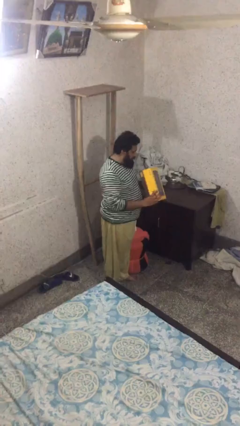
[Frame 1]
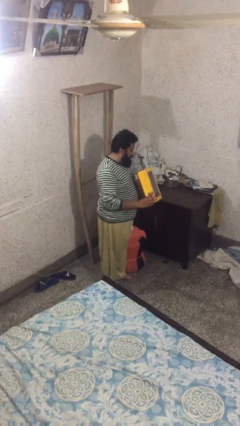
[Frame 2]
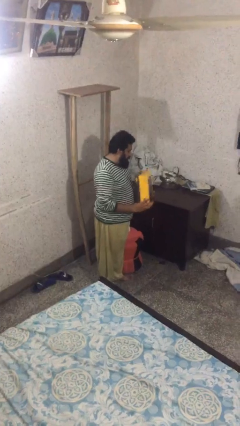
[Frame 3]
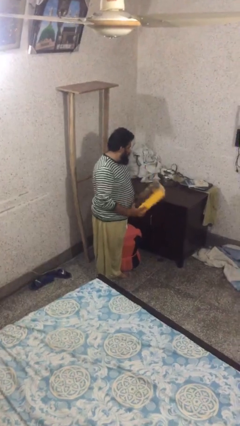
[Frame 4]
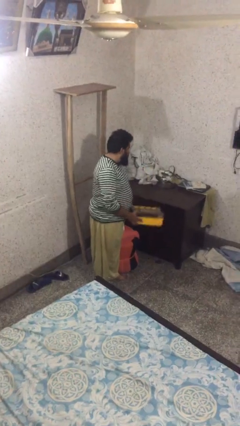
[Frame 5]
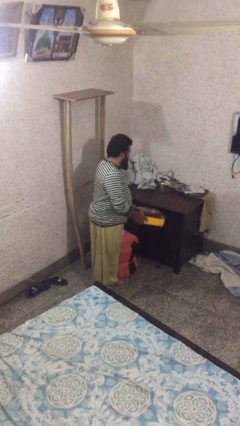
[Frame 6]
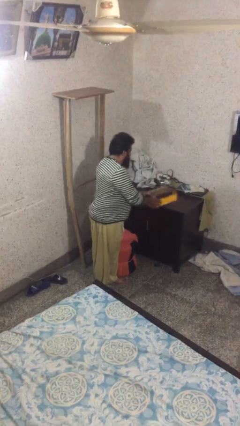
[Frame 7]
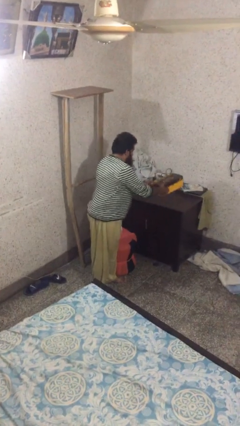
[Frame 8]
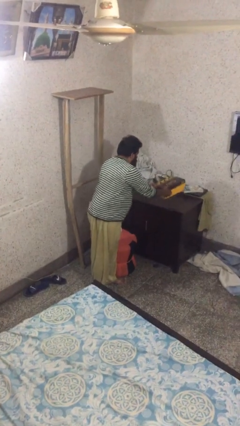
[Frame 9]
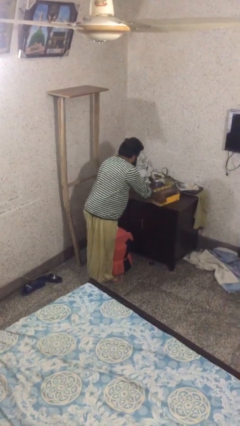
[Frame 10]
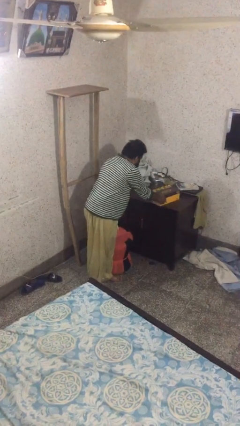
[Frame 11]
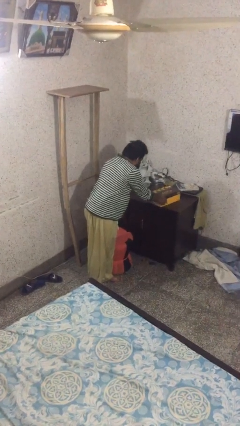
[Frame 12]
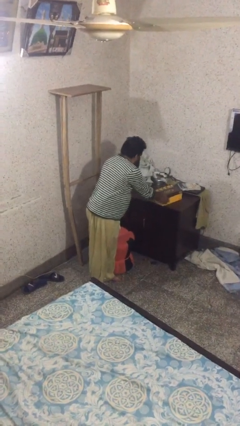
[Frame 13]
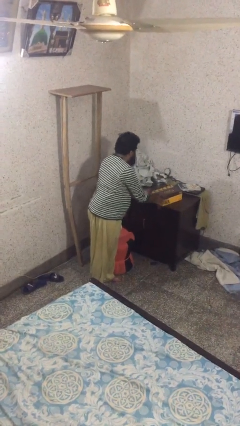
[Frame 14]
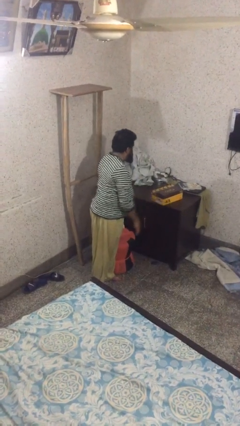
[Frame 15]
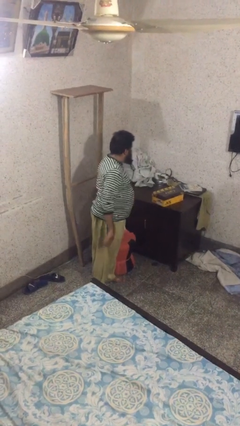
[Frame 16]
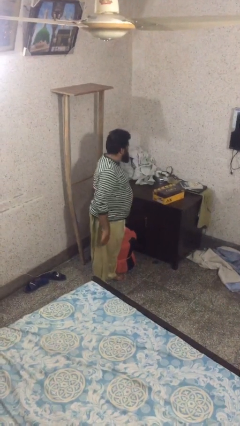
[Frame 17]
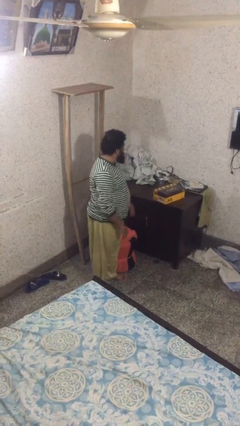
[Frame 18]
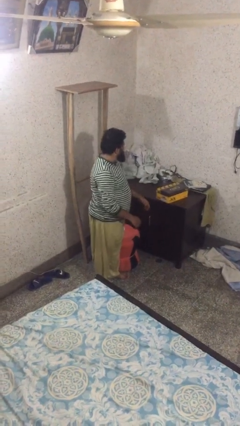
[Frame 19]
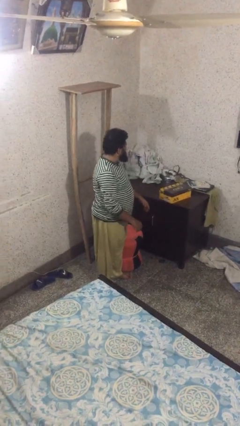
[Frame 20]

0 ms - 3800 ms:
person puts down object on table

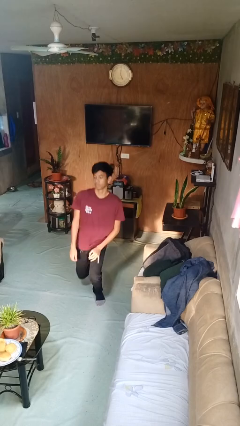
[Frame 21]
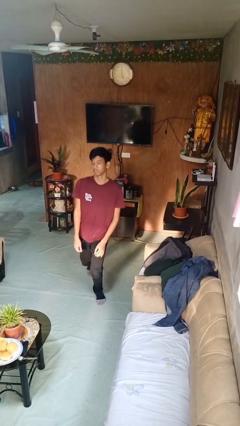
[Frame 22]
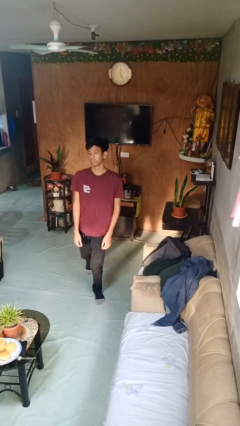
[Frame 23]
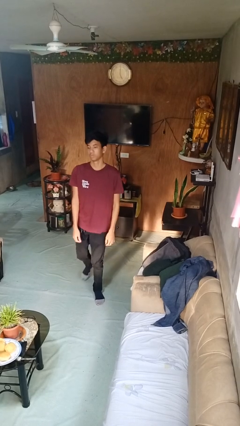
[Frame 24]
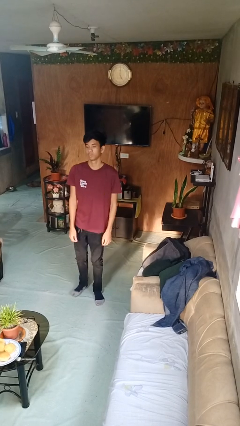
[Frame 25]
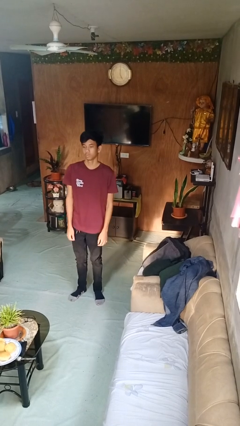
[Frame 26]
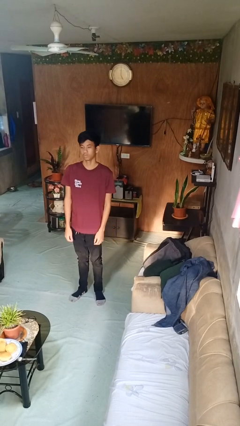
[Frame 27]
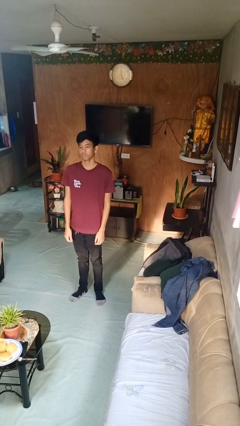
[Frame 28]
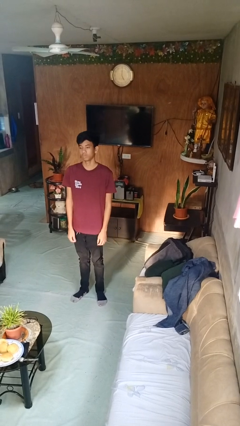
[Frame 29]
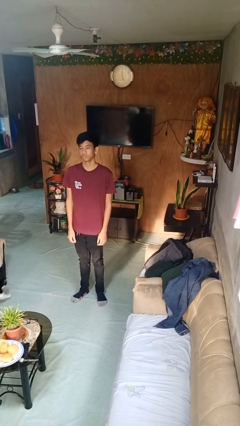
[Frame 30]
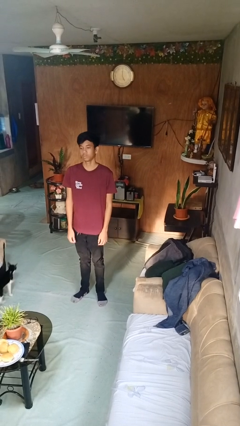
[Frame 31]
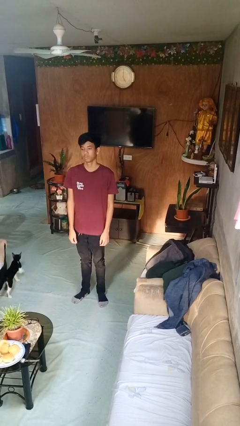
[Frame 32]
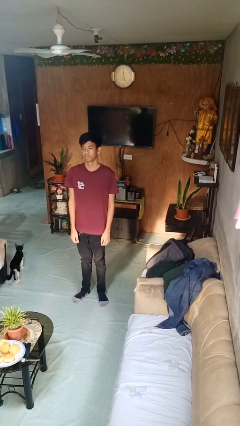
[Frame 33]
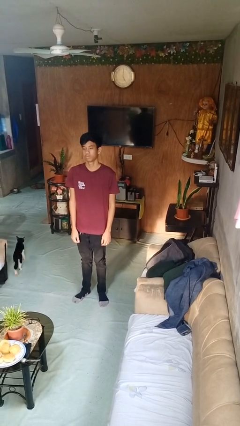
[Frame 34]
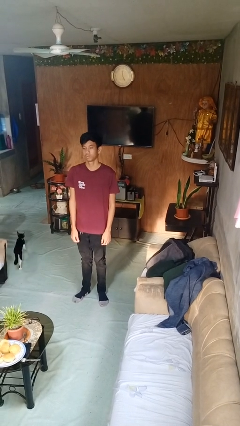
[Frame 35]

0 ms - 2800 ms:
person stands up from floor

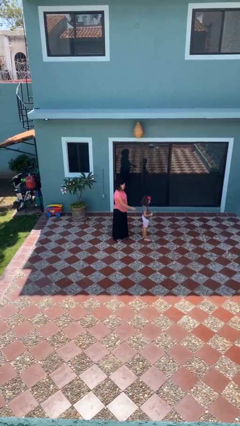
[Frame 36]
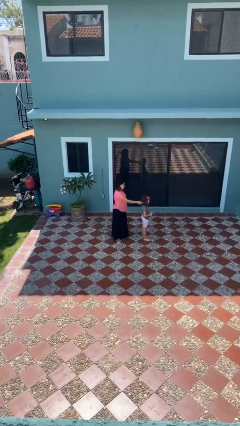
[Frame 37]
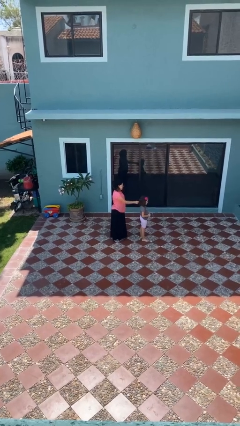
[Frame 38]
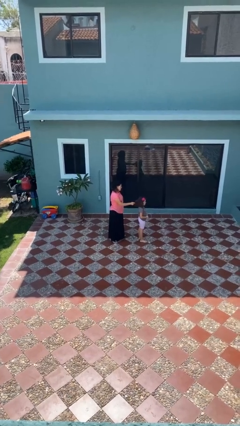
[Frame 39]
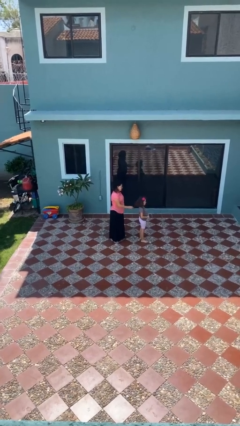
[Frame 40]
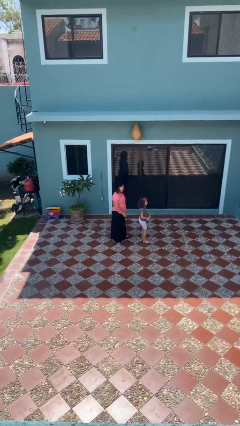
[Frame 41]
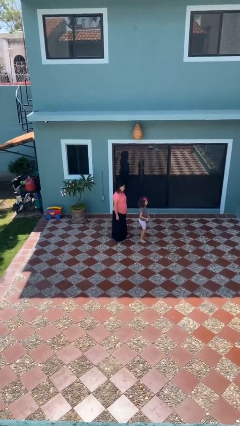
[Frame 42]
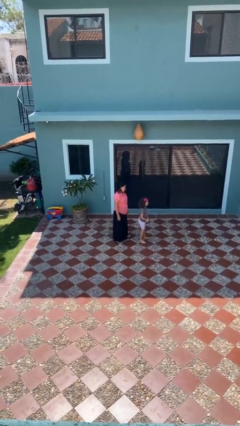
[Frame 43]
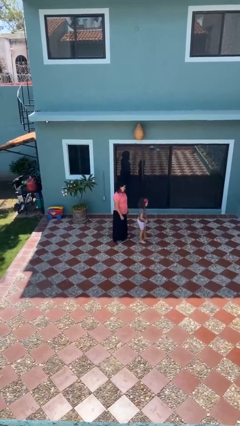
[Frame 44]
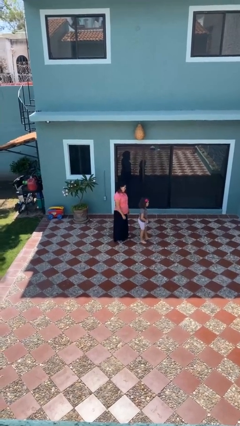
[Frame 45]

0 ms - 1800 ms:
person grabs person by hair

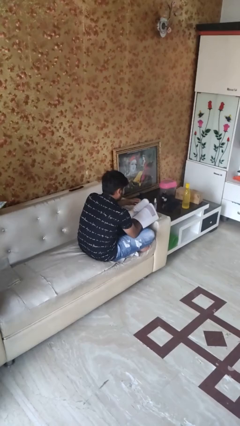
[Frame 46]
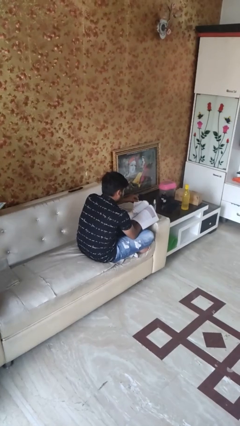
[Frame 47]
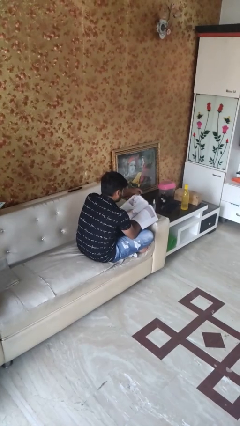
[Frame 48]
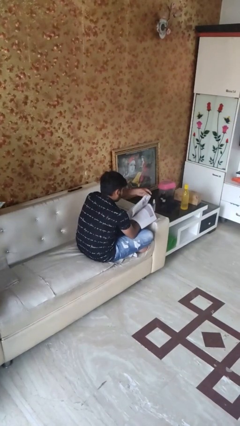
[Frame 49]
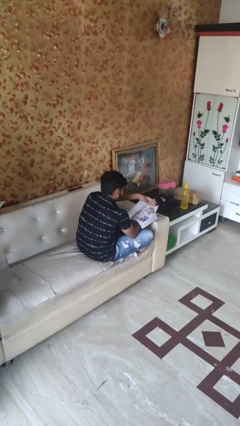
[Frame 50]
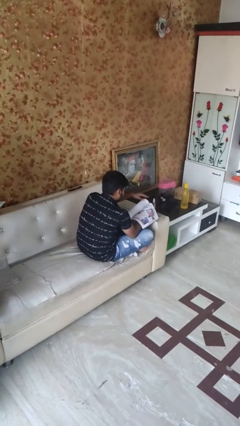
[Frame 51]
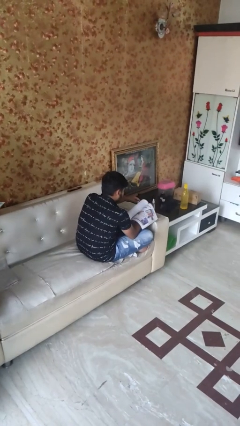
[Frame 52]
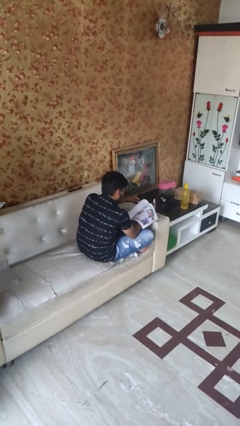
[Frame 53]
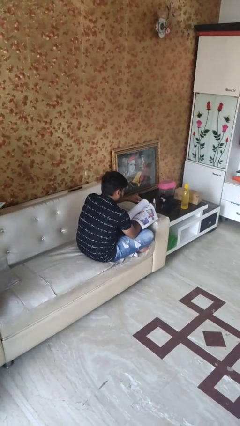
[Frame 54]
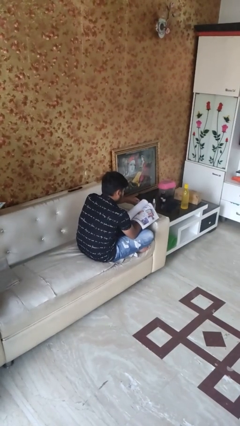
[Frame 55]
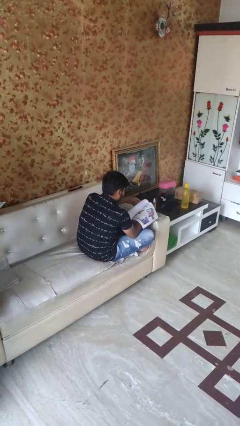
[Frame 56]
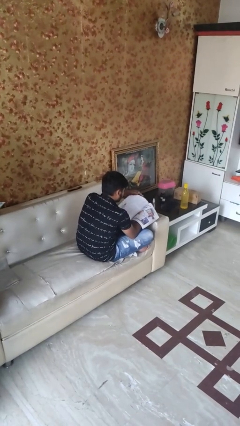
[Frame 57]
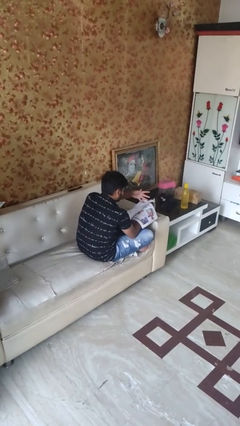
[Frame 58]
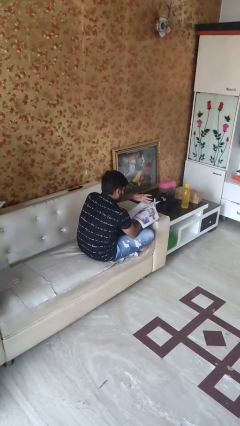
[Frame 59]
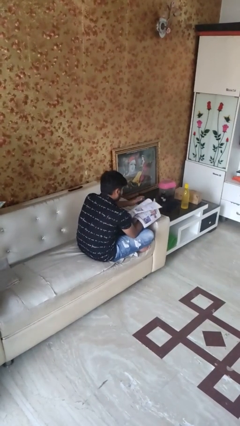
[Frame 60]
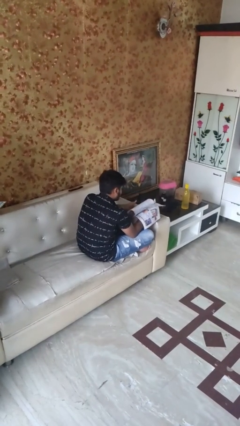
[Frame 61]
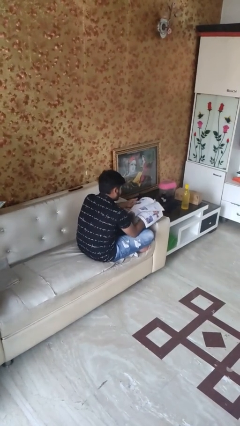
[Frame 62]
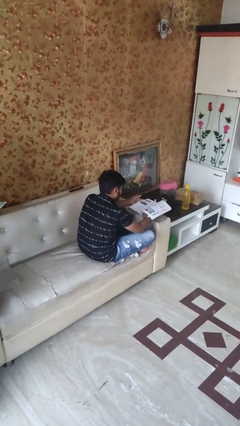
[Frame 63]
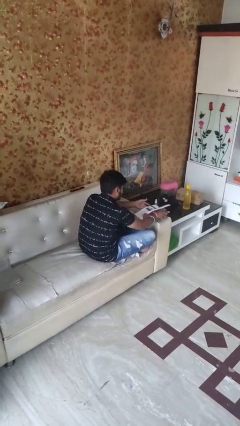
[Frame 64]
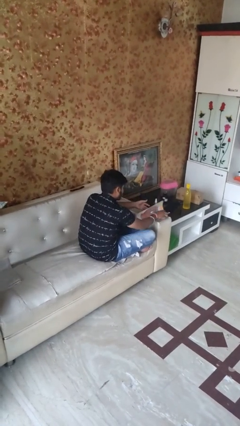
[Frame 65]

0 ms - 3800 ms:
person reads magazine

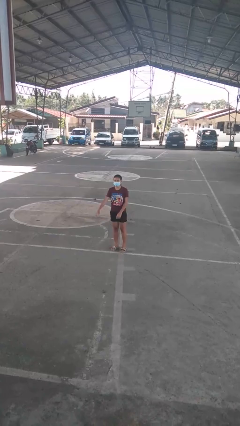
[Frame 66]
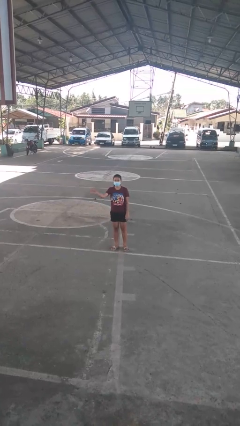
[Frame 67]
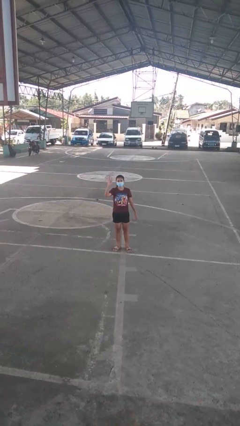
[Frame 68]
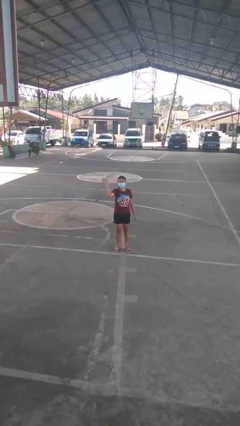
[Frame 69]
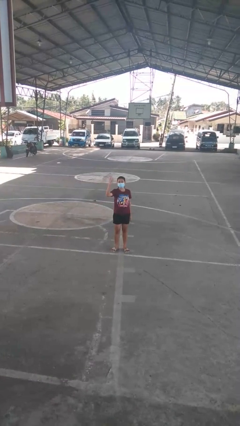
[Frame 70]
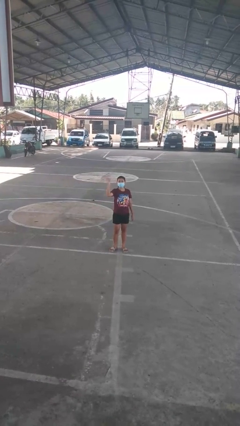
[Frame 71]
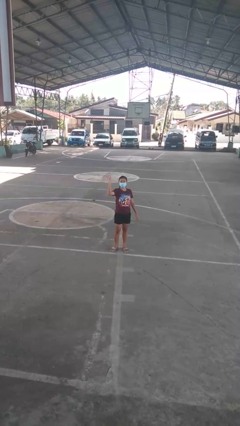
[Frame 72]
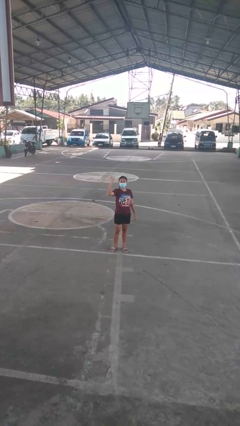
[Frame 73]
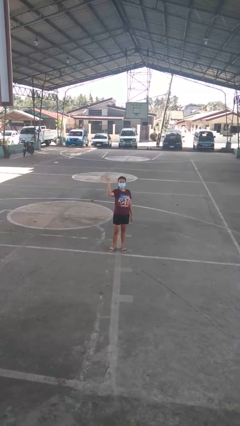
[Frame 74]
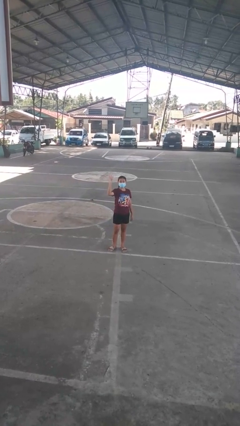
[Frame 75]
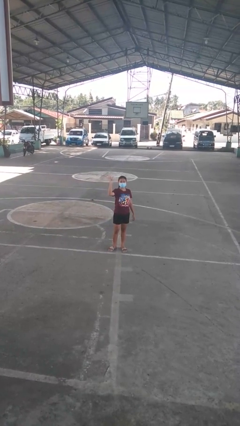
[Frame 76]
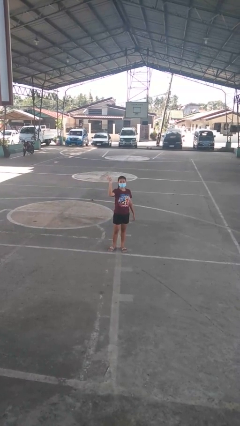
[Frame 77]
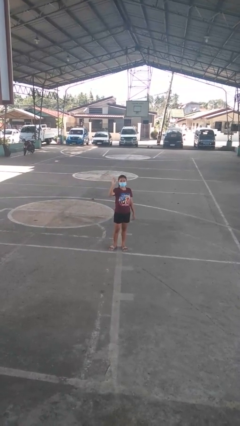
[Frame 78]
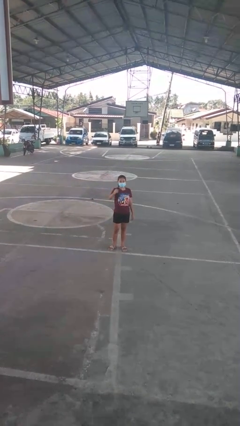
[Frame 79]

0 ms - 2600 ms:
person waves at person

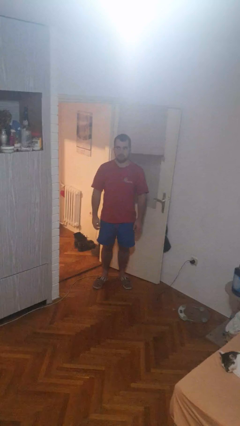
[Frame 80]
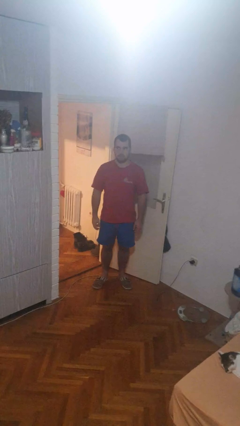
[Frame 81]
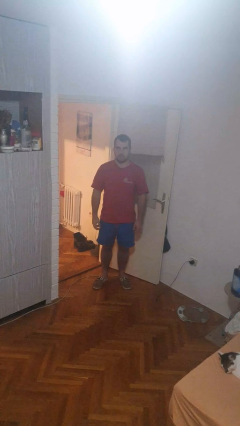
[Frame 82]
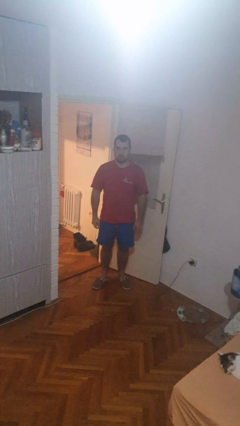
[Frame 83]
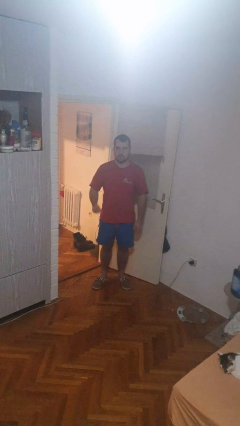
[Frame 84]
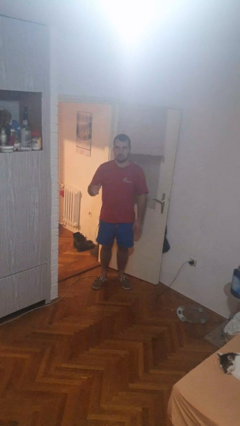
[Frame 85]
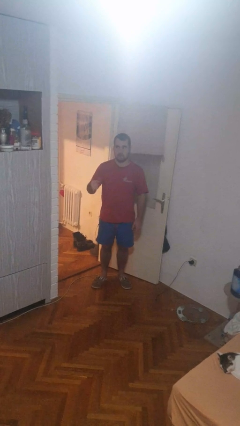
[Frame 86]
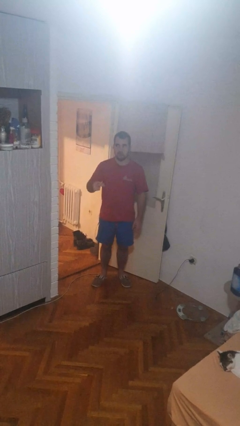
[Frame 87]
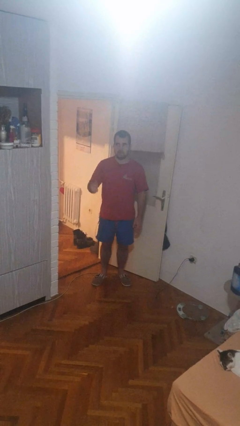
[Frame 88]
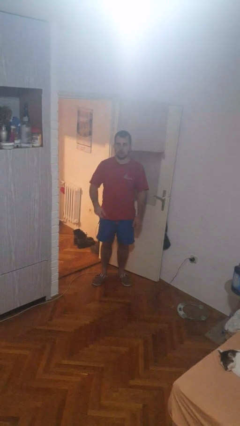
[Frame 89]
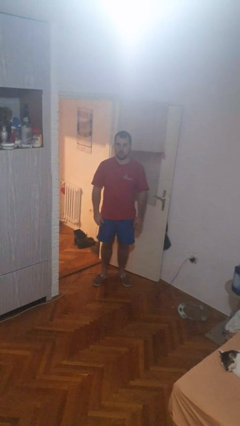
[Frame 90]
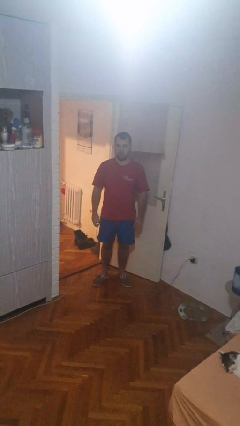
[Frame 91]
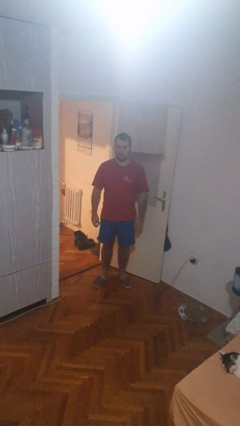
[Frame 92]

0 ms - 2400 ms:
person snaps fingers

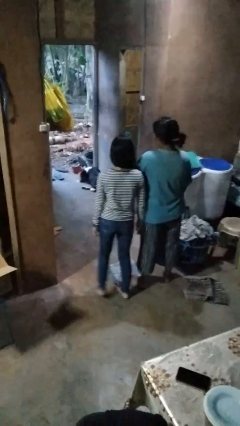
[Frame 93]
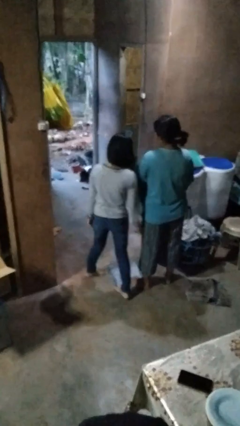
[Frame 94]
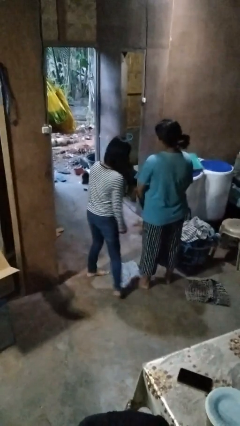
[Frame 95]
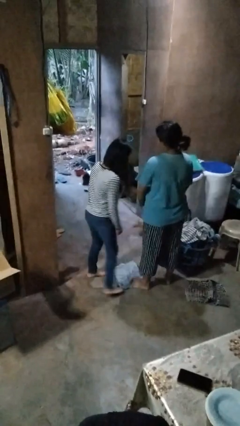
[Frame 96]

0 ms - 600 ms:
person bumps into person
